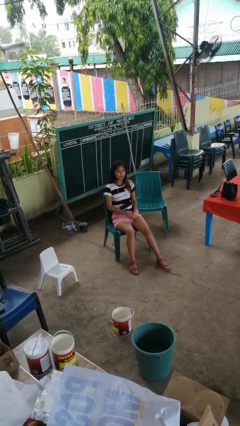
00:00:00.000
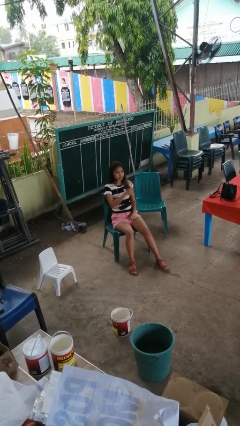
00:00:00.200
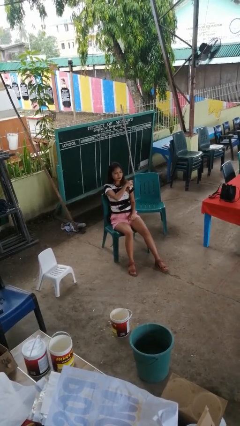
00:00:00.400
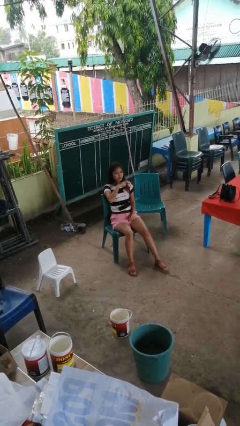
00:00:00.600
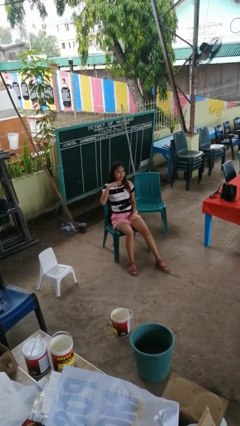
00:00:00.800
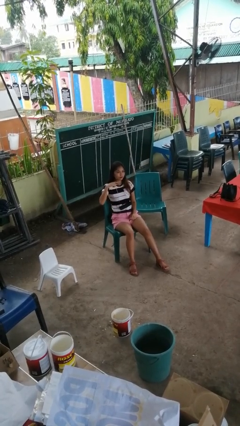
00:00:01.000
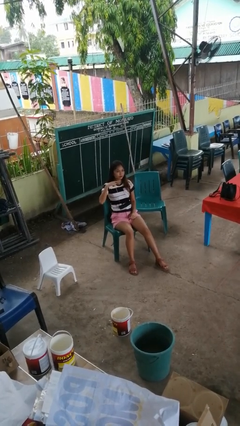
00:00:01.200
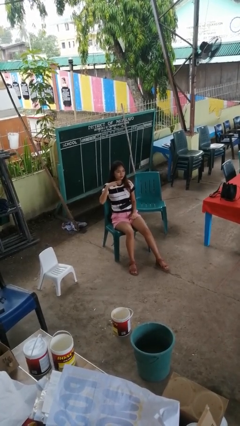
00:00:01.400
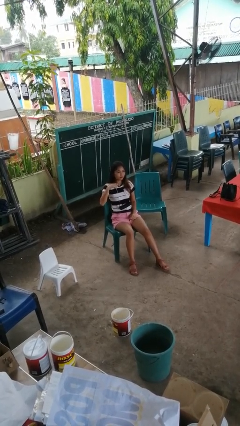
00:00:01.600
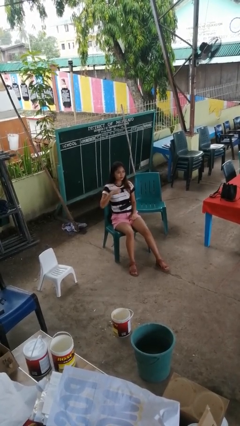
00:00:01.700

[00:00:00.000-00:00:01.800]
person gestures cut

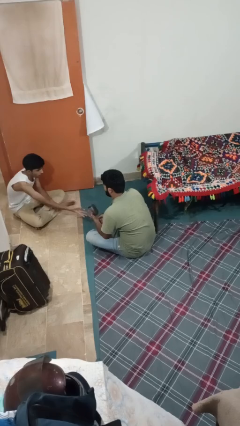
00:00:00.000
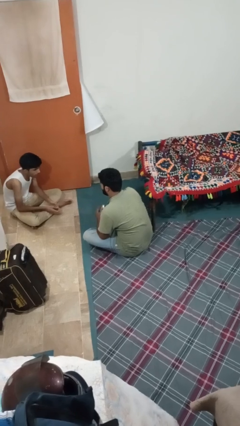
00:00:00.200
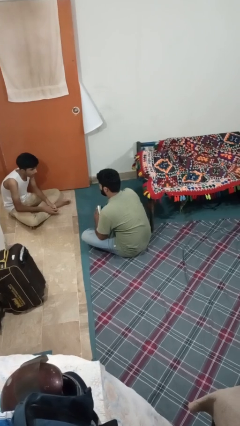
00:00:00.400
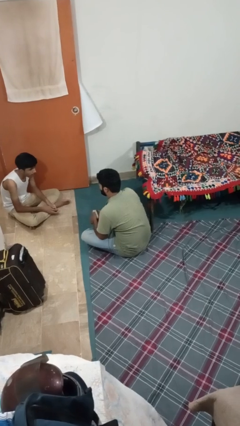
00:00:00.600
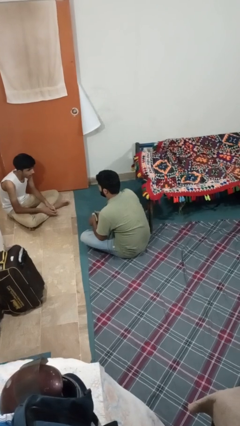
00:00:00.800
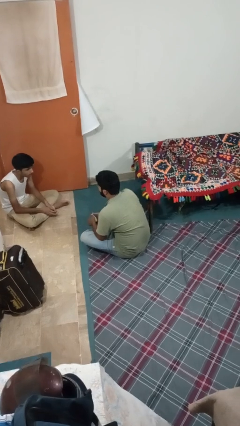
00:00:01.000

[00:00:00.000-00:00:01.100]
person catches object from person

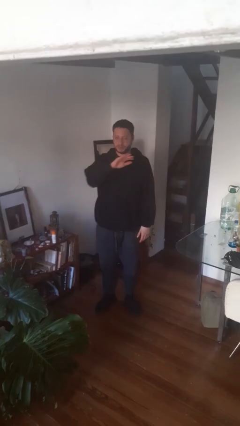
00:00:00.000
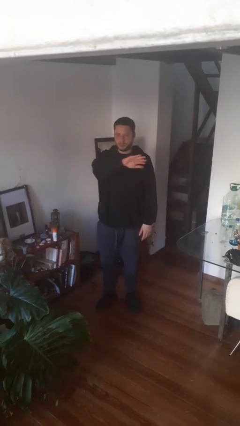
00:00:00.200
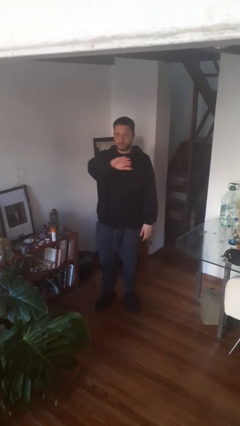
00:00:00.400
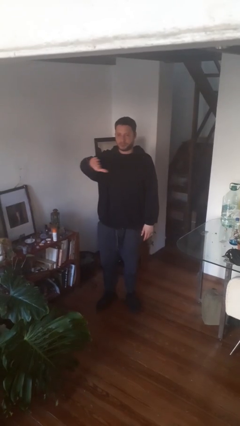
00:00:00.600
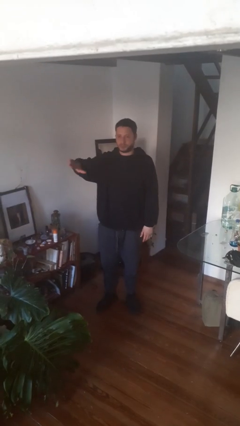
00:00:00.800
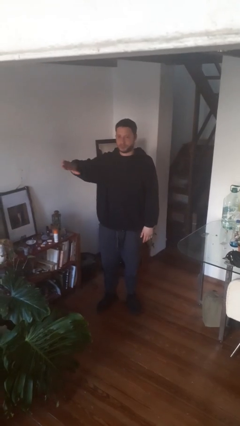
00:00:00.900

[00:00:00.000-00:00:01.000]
person gestures swipe right

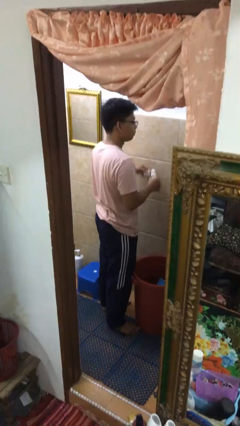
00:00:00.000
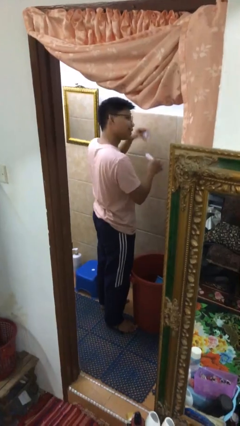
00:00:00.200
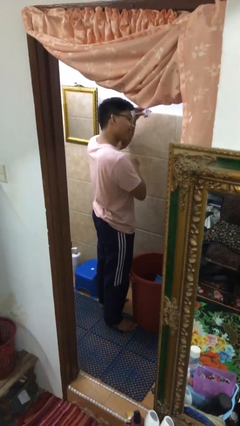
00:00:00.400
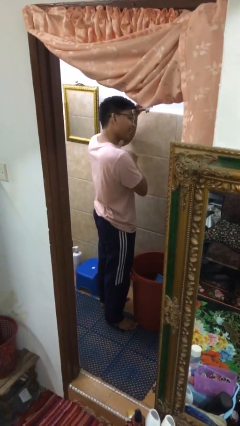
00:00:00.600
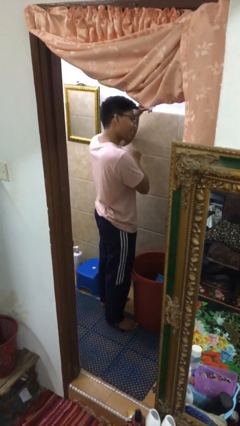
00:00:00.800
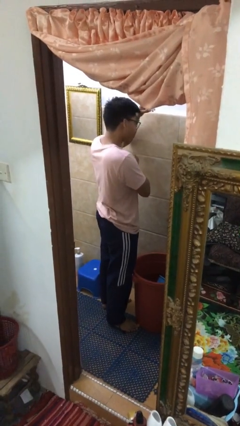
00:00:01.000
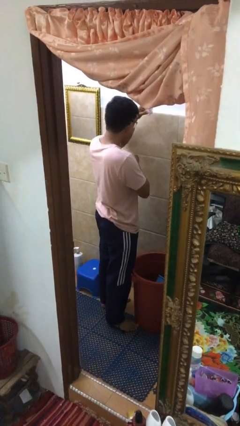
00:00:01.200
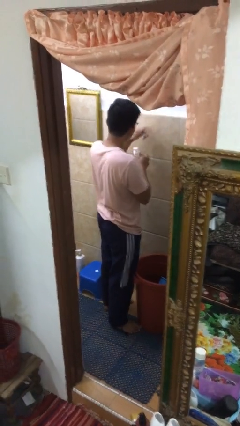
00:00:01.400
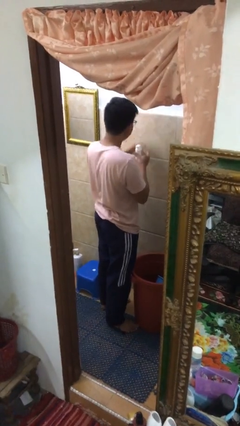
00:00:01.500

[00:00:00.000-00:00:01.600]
person applies deodorant

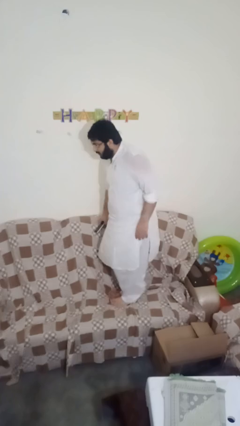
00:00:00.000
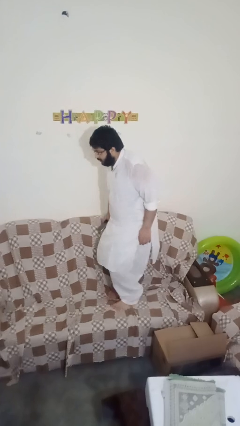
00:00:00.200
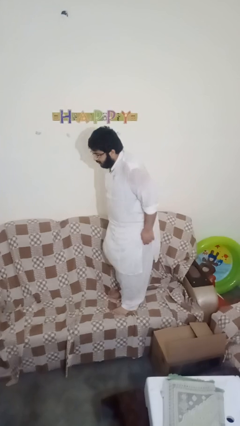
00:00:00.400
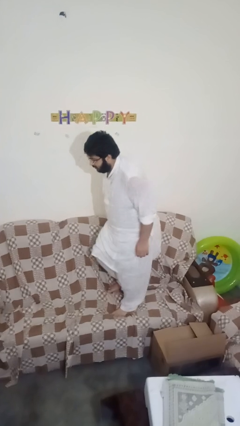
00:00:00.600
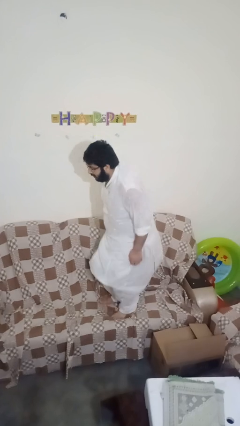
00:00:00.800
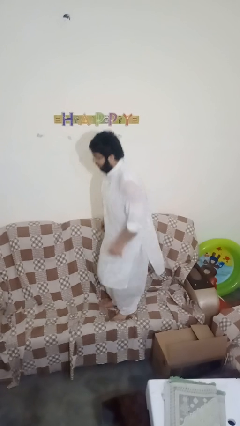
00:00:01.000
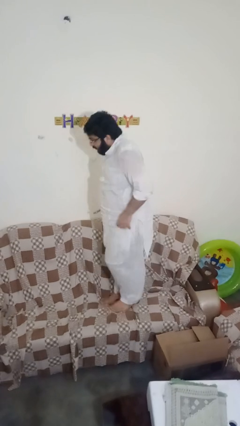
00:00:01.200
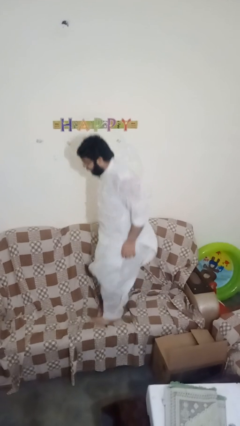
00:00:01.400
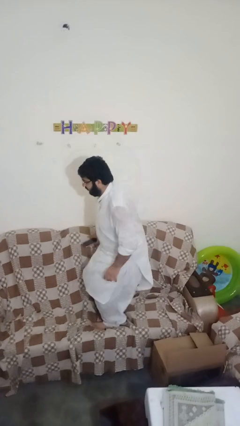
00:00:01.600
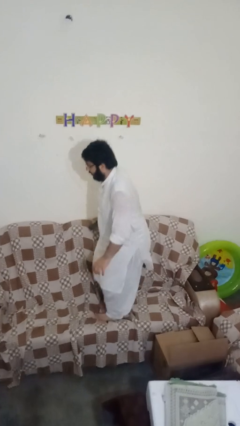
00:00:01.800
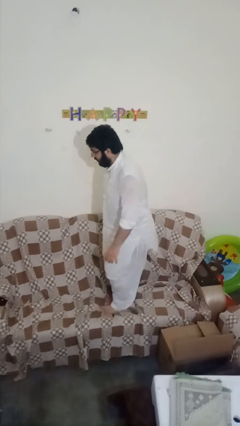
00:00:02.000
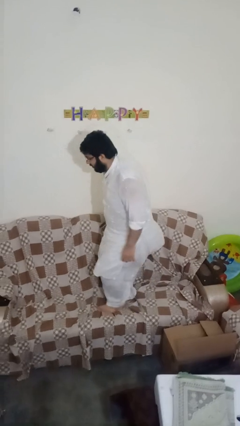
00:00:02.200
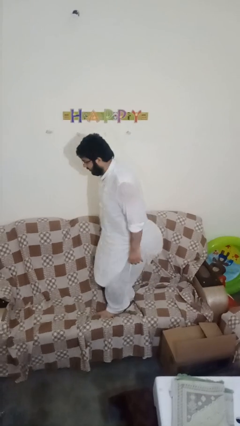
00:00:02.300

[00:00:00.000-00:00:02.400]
person jumps on couch

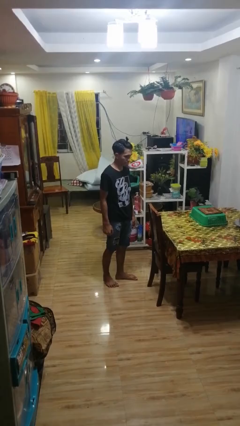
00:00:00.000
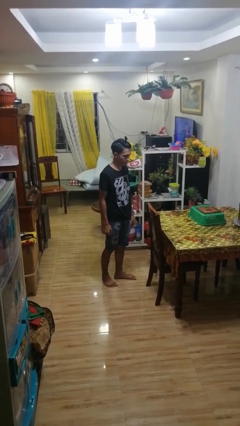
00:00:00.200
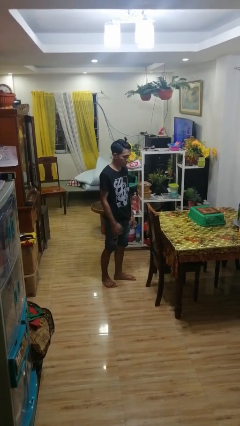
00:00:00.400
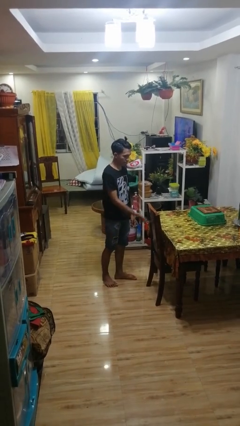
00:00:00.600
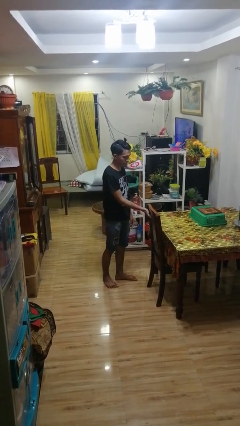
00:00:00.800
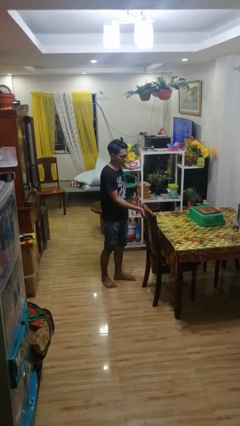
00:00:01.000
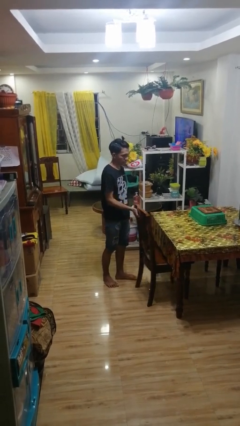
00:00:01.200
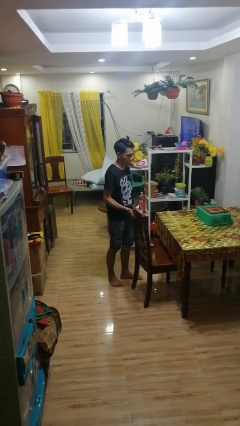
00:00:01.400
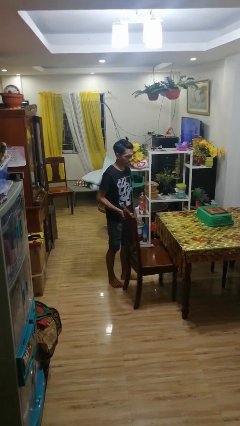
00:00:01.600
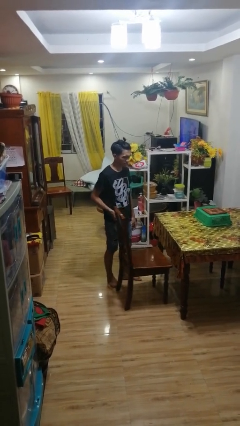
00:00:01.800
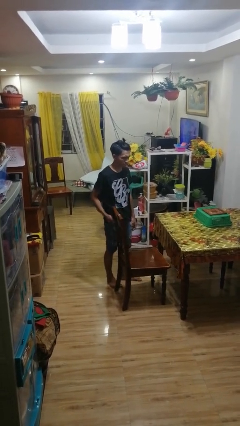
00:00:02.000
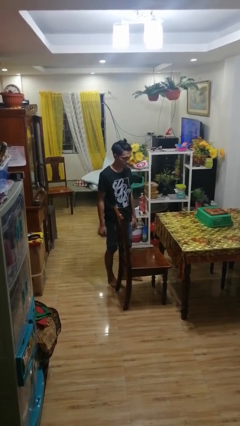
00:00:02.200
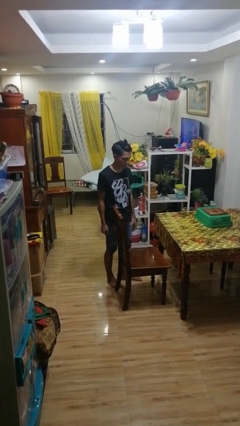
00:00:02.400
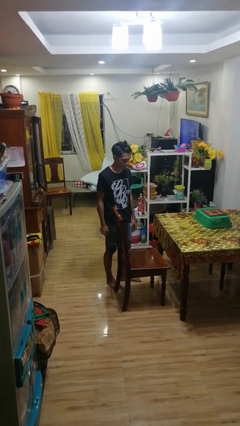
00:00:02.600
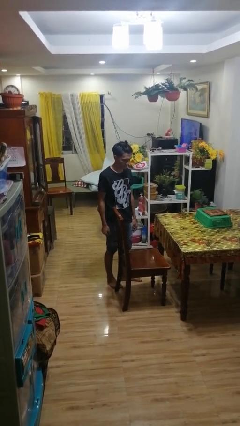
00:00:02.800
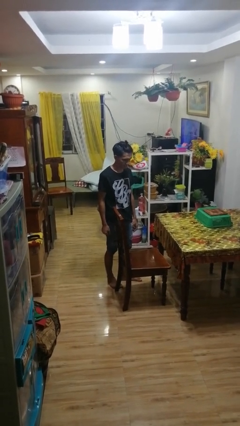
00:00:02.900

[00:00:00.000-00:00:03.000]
person pulls out chair

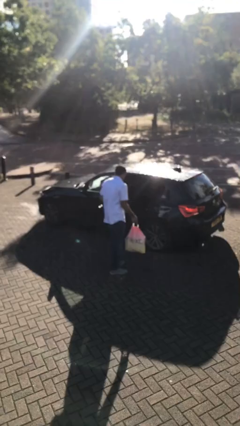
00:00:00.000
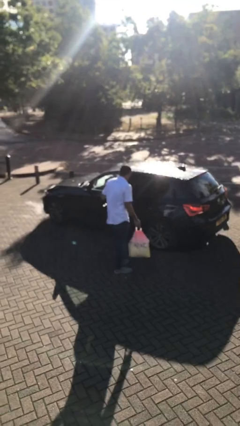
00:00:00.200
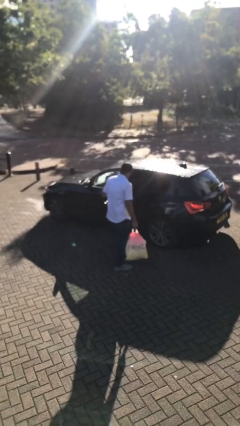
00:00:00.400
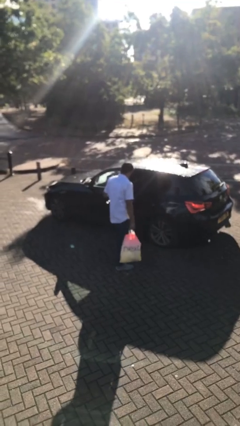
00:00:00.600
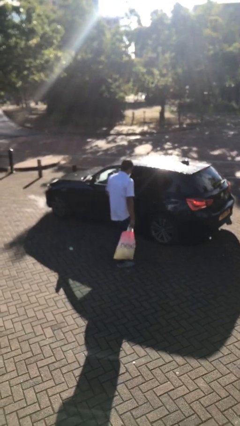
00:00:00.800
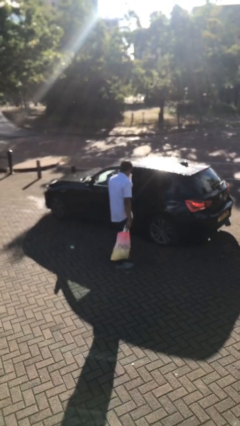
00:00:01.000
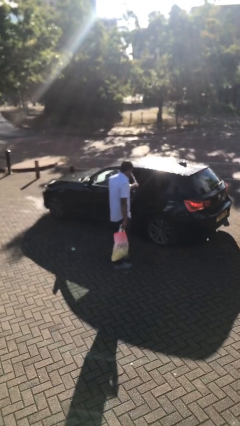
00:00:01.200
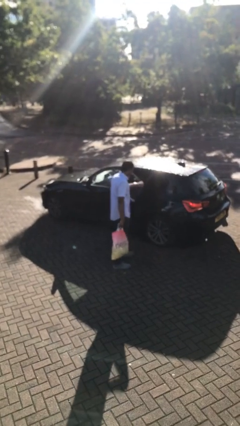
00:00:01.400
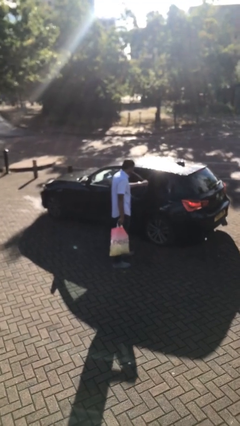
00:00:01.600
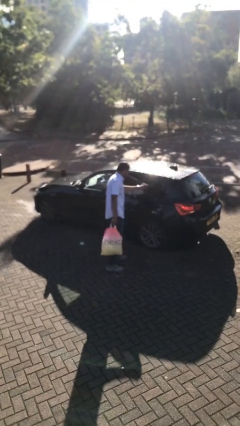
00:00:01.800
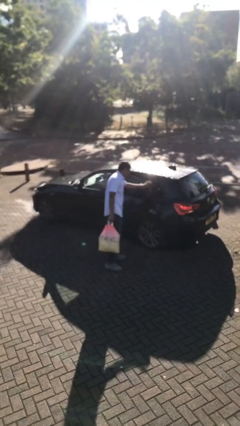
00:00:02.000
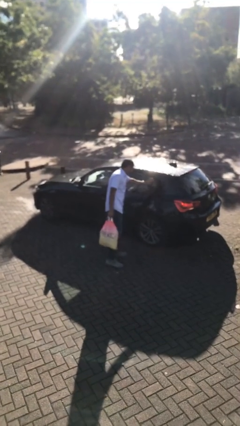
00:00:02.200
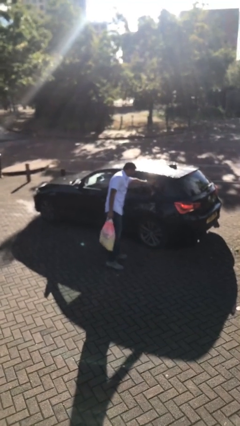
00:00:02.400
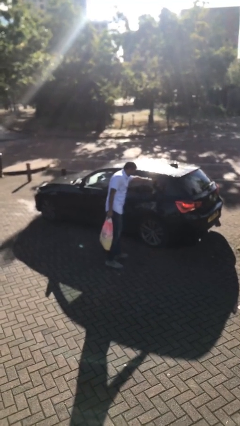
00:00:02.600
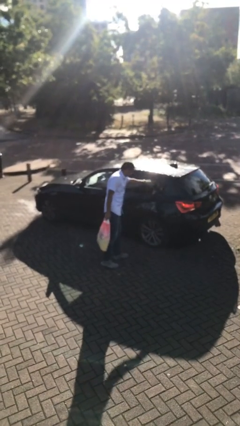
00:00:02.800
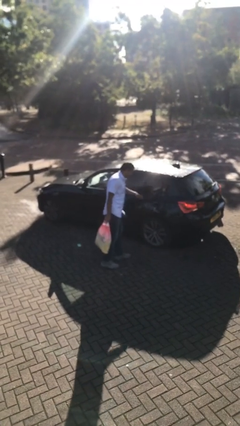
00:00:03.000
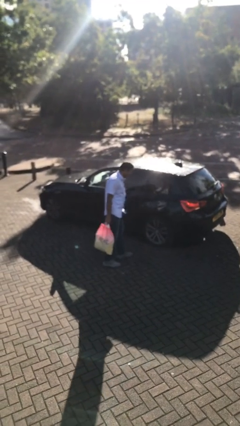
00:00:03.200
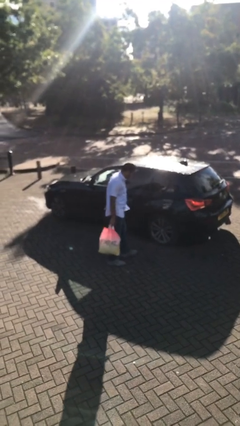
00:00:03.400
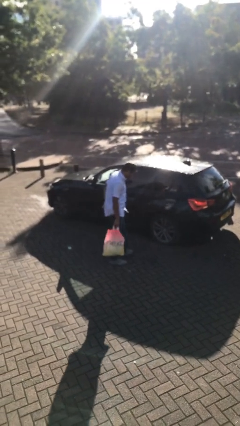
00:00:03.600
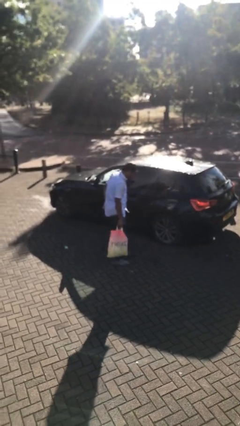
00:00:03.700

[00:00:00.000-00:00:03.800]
person closes car door

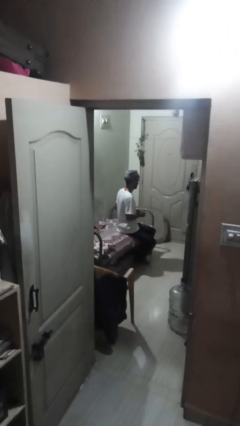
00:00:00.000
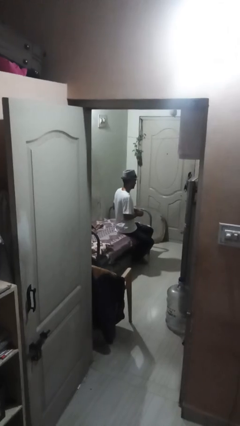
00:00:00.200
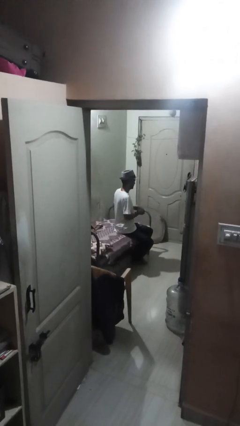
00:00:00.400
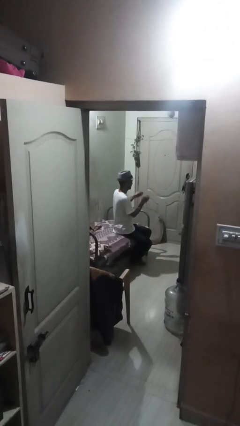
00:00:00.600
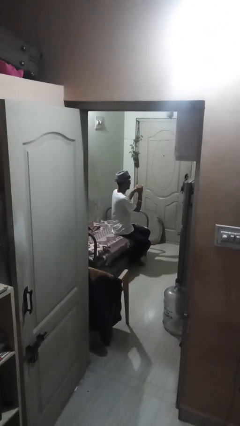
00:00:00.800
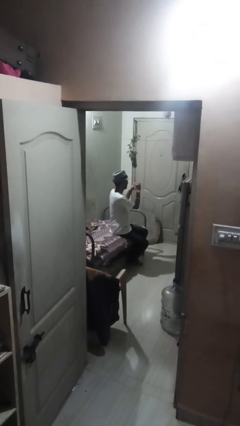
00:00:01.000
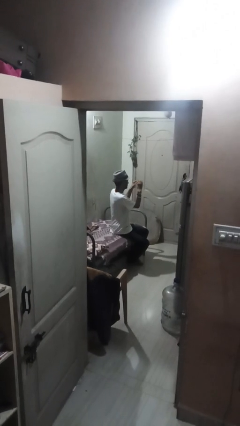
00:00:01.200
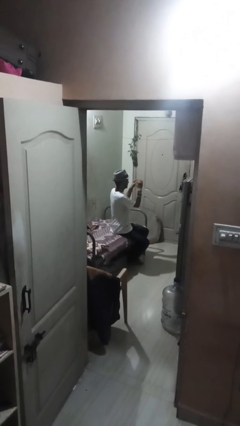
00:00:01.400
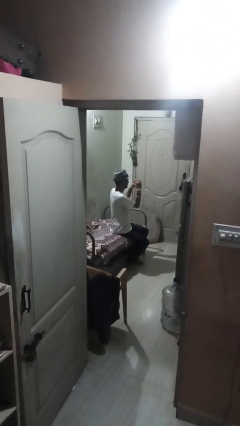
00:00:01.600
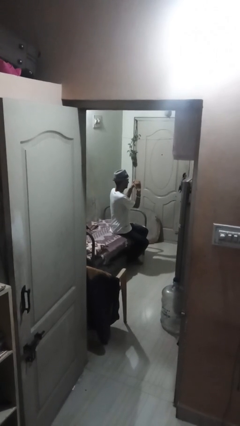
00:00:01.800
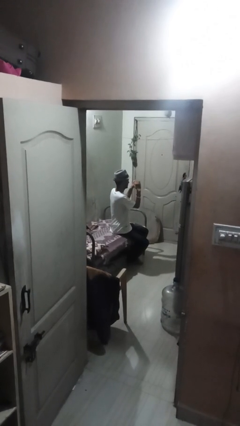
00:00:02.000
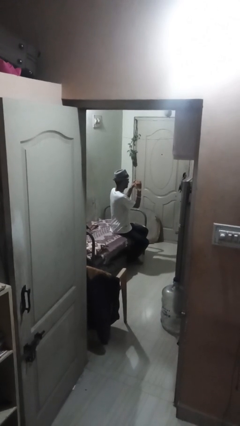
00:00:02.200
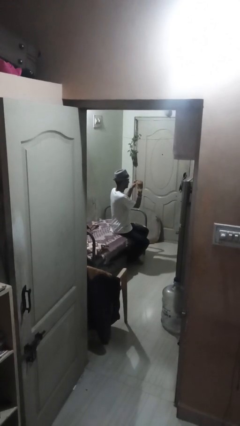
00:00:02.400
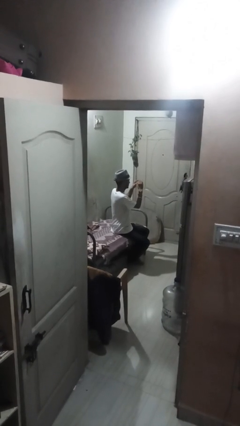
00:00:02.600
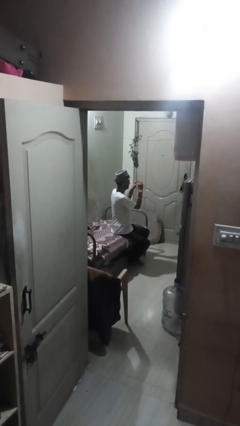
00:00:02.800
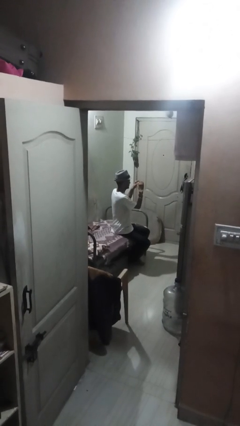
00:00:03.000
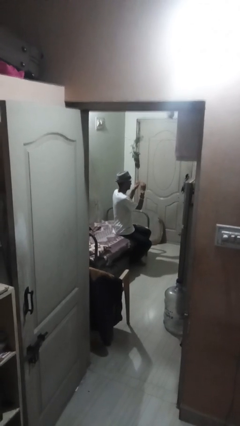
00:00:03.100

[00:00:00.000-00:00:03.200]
person files fingernails
